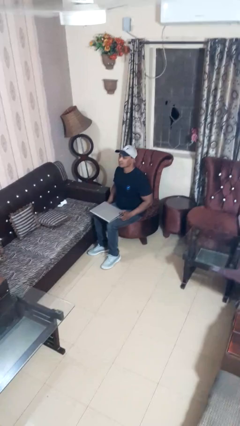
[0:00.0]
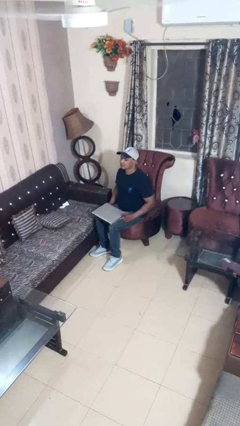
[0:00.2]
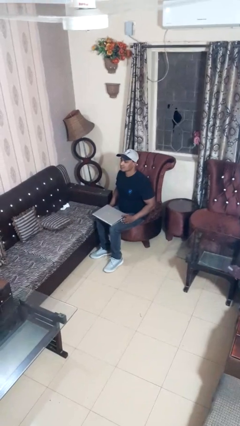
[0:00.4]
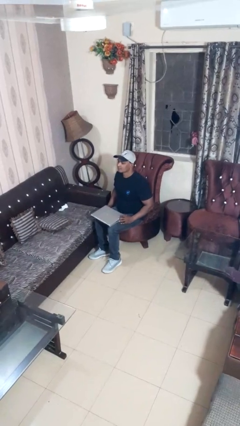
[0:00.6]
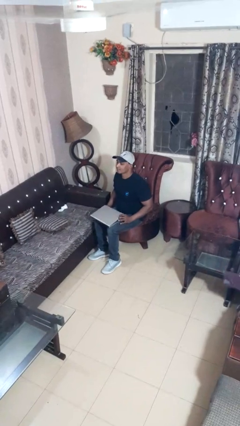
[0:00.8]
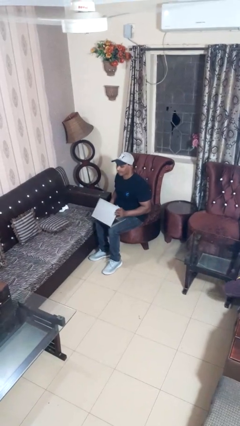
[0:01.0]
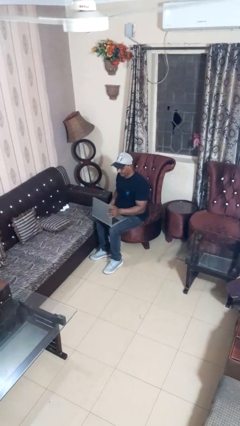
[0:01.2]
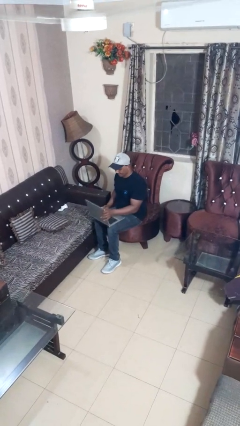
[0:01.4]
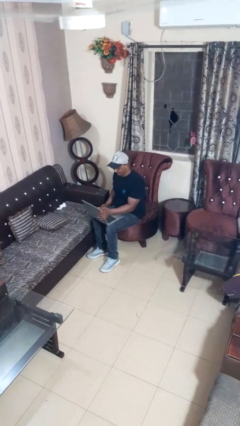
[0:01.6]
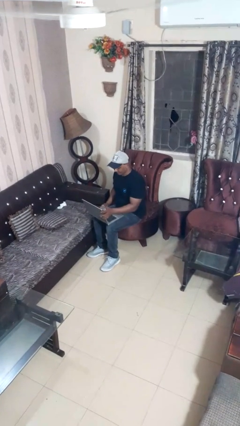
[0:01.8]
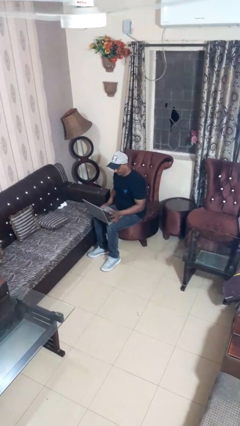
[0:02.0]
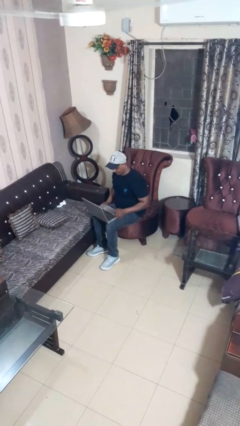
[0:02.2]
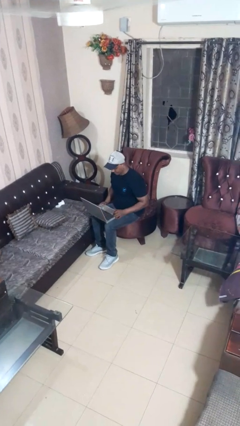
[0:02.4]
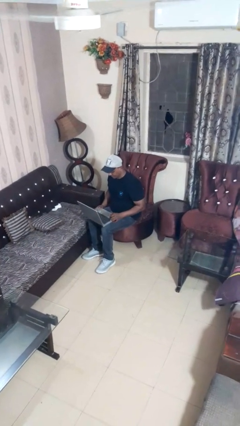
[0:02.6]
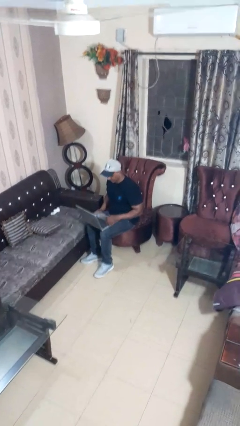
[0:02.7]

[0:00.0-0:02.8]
person opens laptop

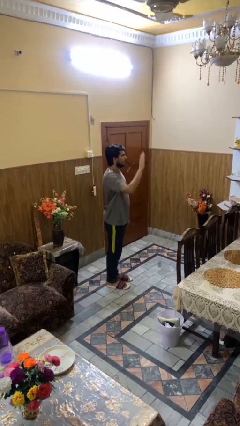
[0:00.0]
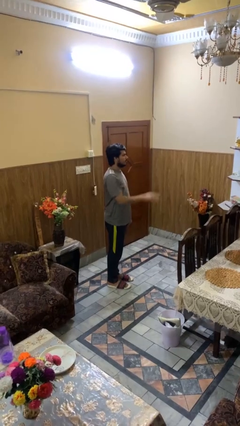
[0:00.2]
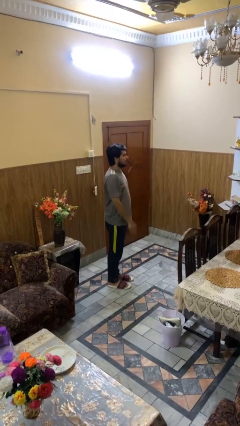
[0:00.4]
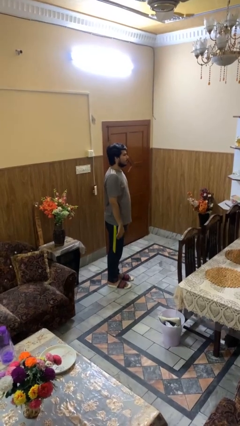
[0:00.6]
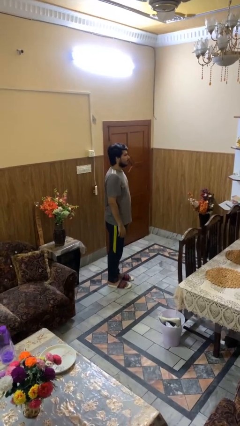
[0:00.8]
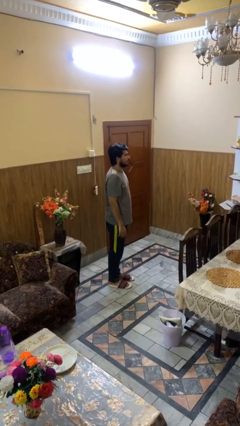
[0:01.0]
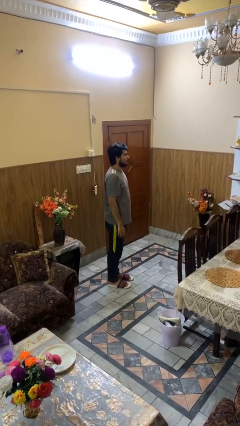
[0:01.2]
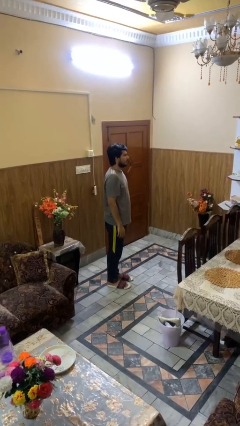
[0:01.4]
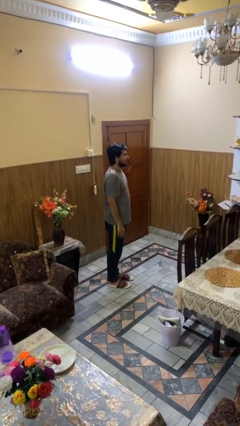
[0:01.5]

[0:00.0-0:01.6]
person gestures lower hand

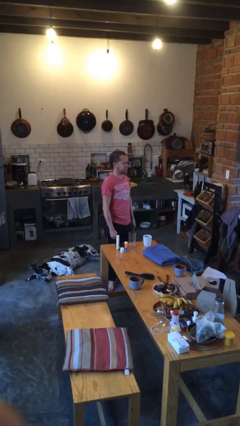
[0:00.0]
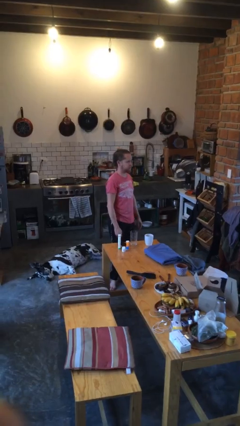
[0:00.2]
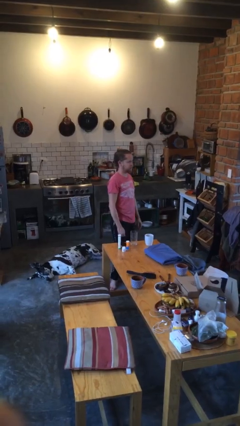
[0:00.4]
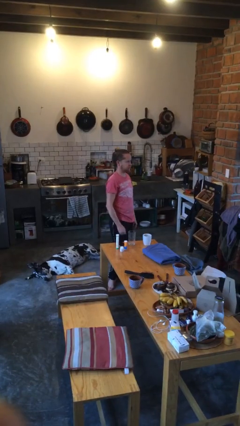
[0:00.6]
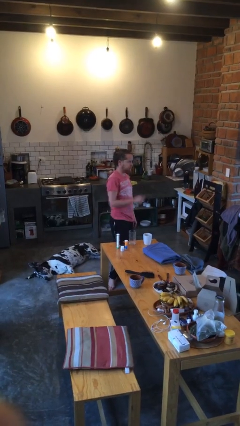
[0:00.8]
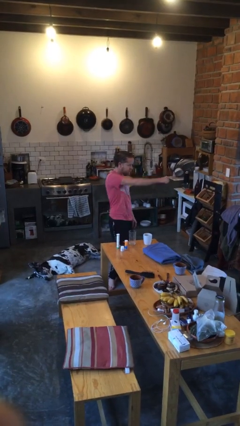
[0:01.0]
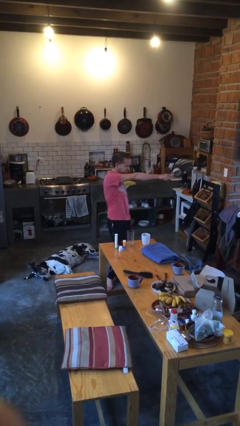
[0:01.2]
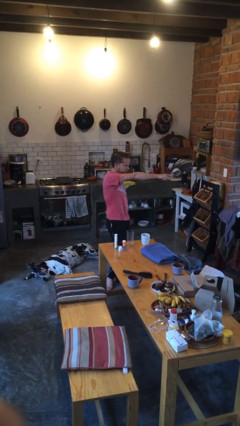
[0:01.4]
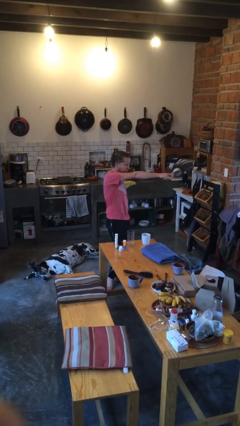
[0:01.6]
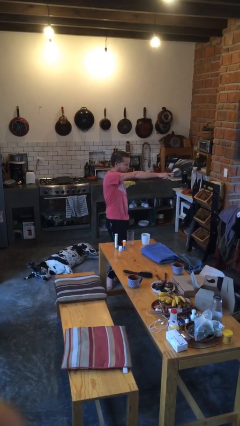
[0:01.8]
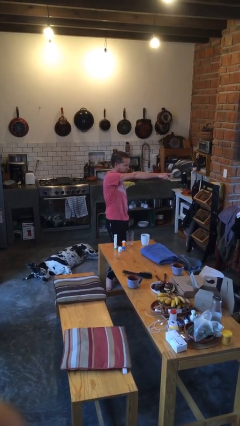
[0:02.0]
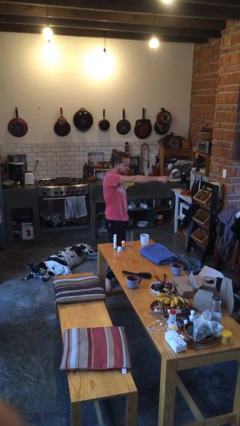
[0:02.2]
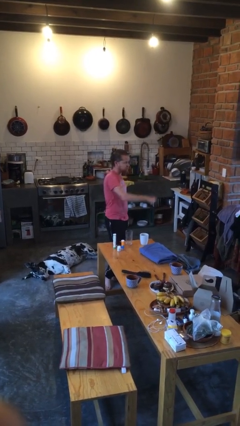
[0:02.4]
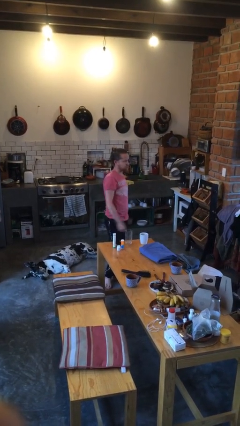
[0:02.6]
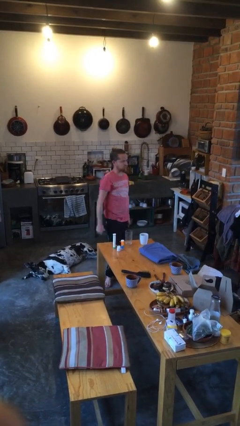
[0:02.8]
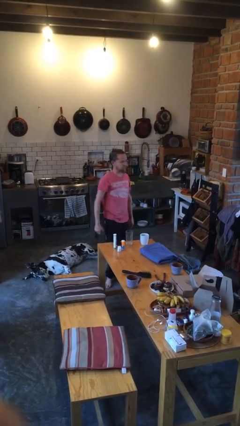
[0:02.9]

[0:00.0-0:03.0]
person points at person

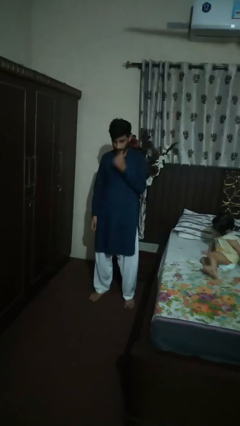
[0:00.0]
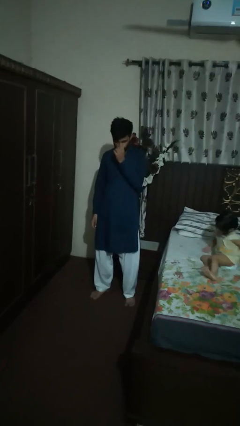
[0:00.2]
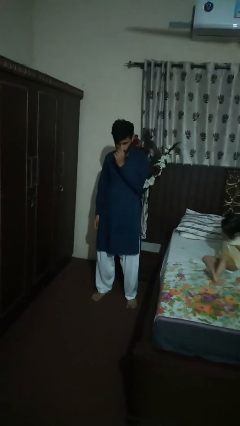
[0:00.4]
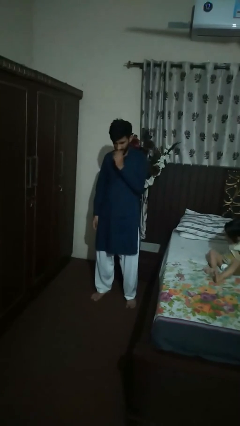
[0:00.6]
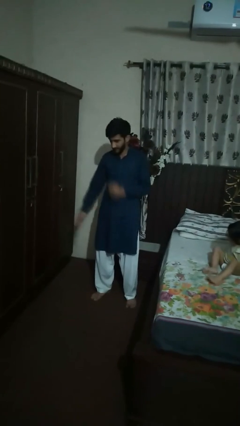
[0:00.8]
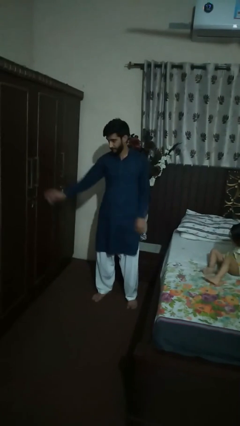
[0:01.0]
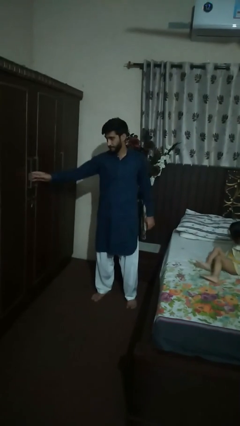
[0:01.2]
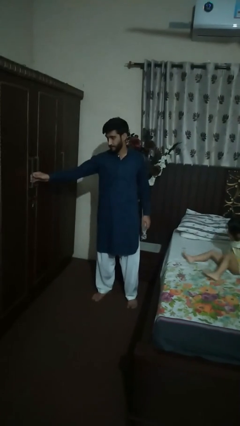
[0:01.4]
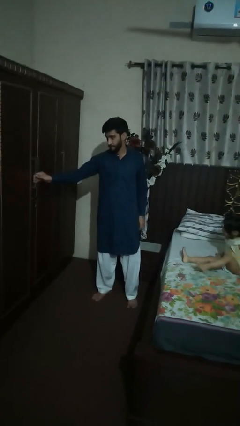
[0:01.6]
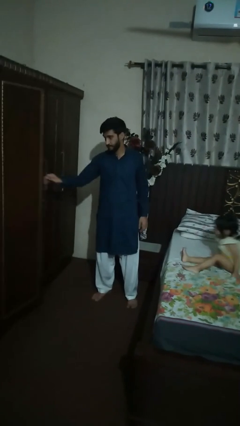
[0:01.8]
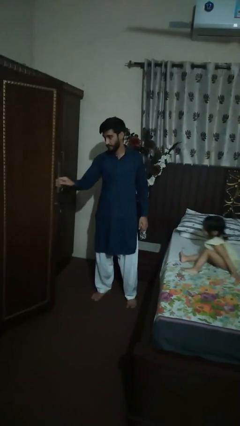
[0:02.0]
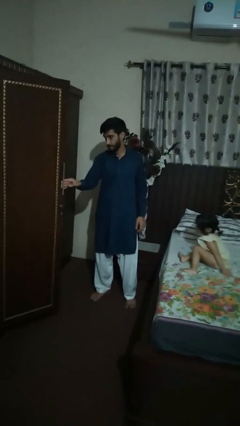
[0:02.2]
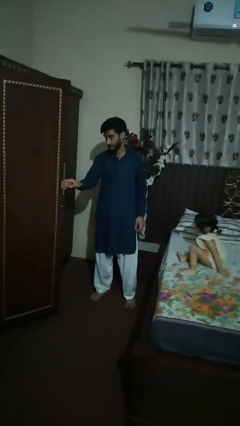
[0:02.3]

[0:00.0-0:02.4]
person opens dresser drawer

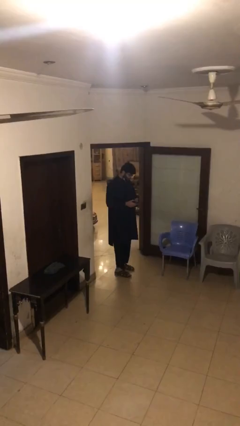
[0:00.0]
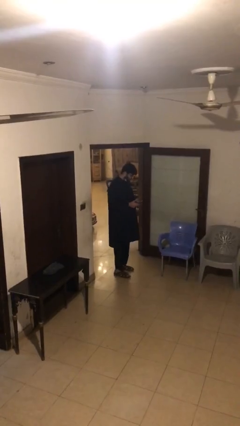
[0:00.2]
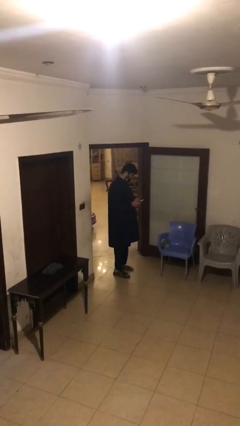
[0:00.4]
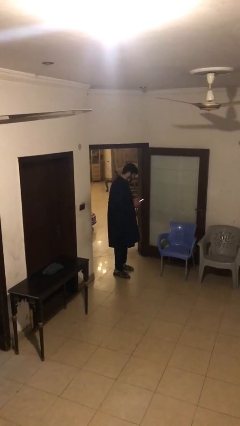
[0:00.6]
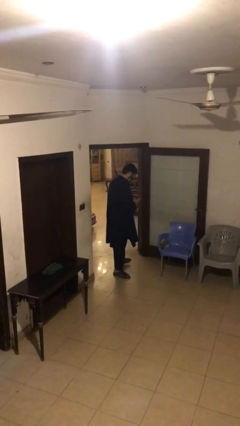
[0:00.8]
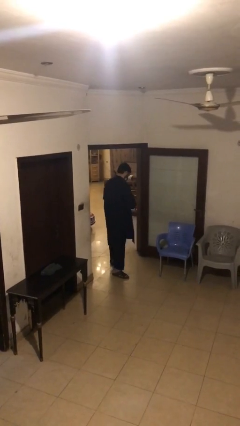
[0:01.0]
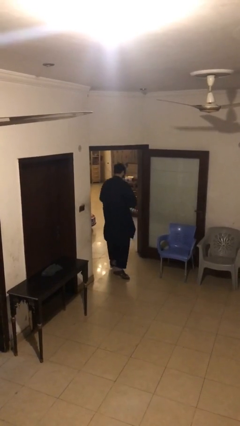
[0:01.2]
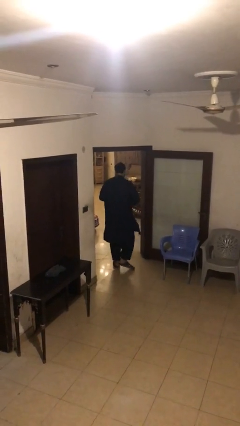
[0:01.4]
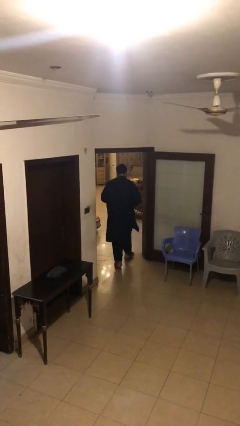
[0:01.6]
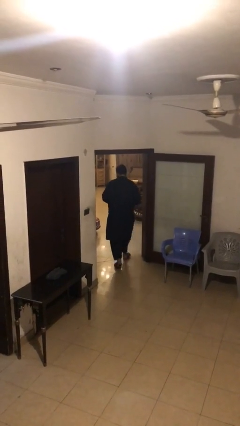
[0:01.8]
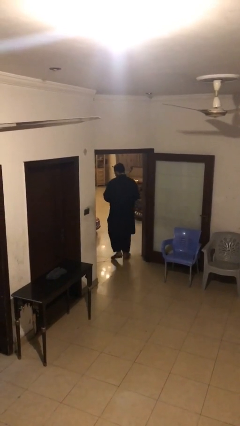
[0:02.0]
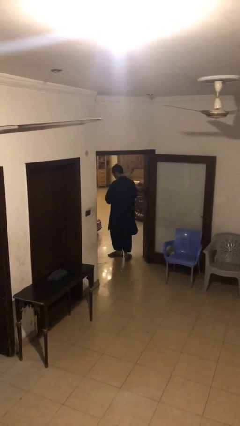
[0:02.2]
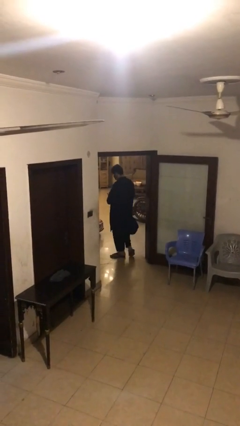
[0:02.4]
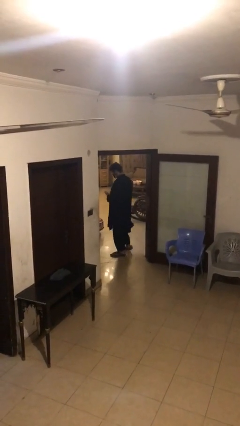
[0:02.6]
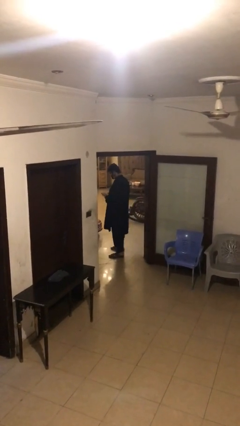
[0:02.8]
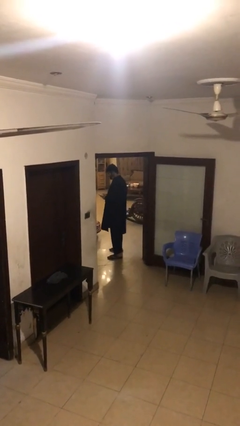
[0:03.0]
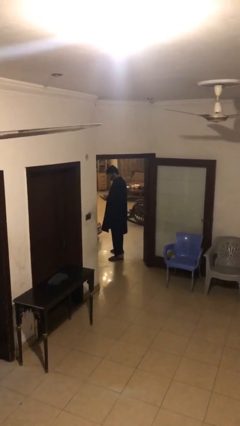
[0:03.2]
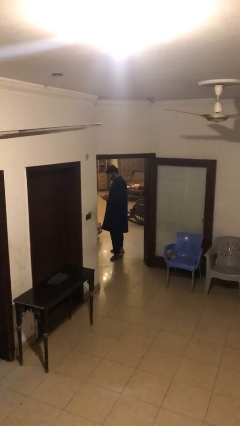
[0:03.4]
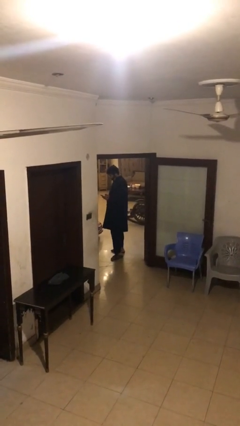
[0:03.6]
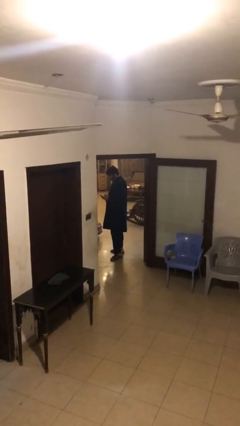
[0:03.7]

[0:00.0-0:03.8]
person exits scene through structure

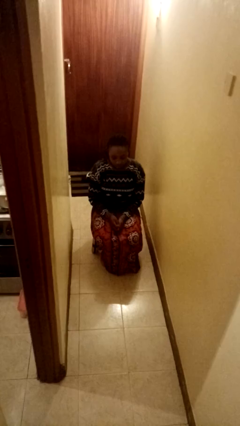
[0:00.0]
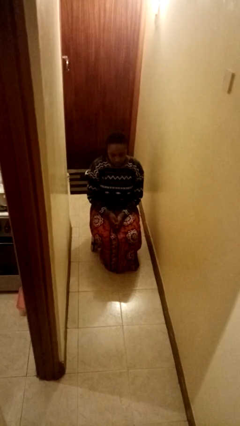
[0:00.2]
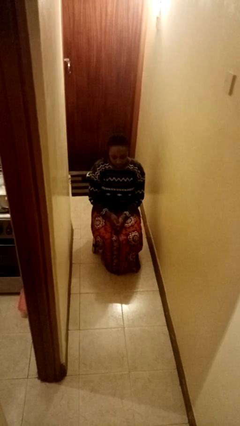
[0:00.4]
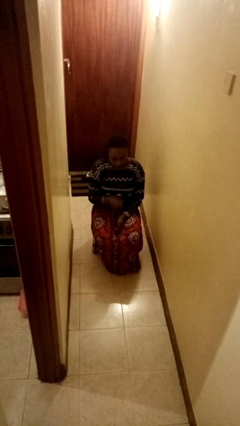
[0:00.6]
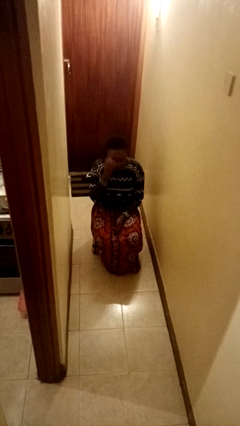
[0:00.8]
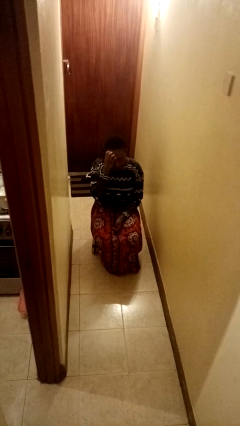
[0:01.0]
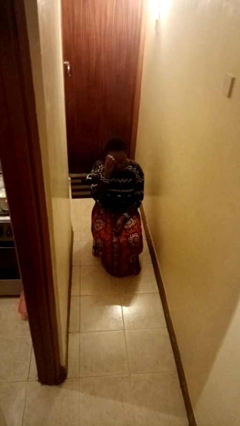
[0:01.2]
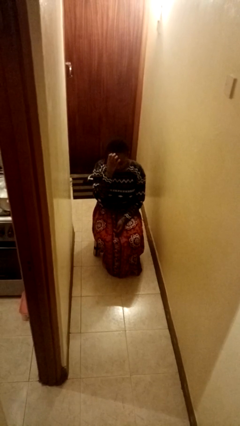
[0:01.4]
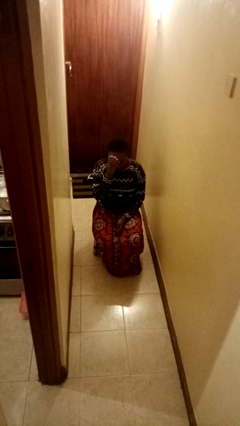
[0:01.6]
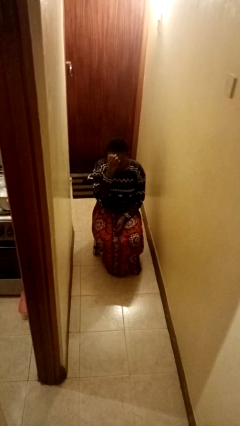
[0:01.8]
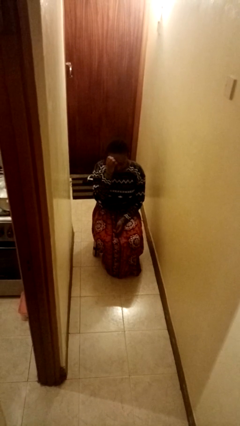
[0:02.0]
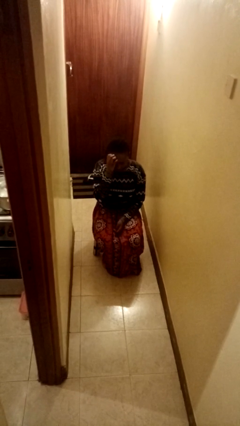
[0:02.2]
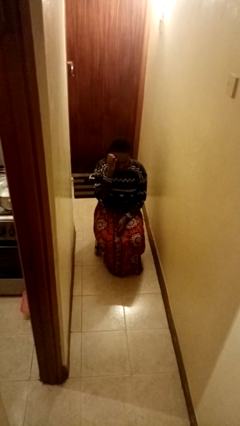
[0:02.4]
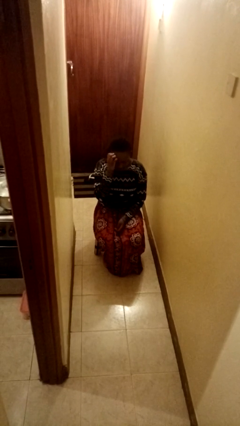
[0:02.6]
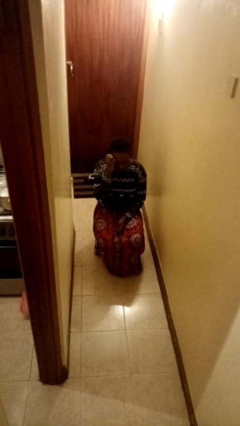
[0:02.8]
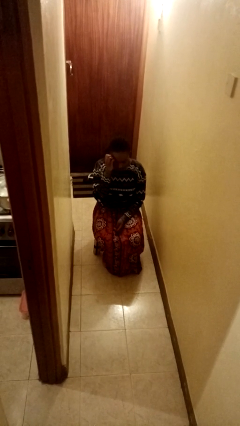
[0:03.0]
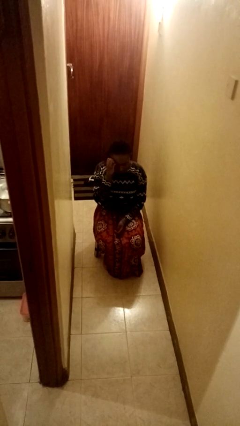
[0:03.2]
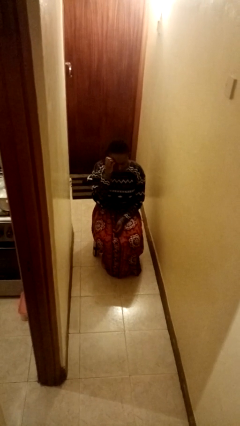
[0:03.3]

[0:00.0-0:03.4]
person scratches face

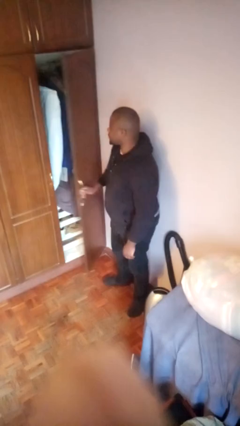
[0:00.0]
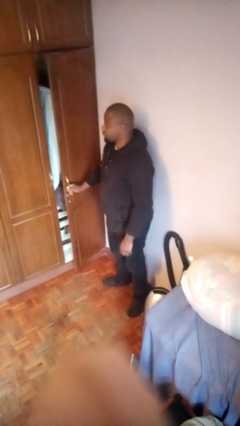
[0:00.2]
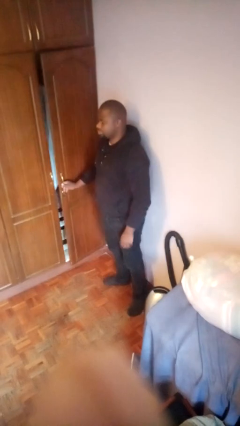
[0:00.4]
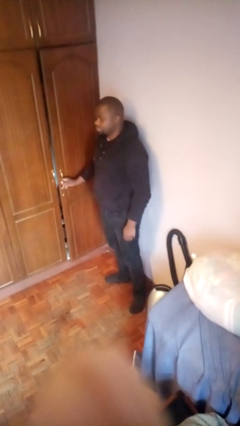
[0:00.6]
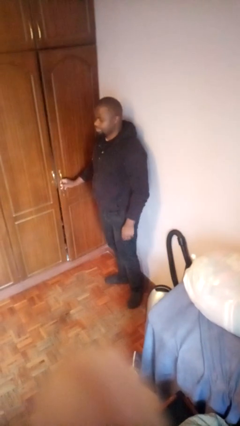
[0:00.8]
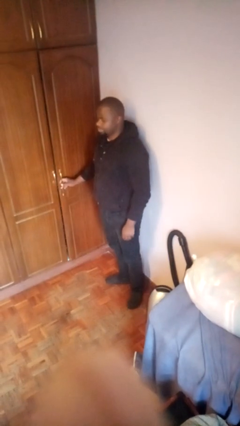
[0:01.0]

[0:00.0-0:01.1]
person closes closet door
